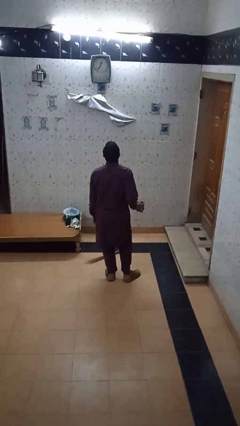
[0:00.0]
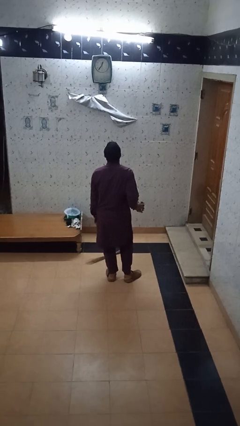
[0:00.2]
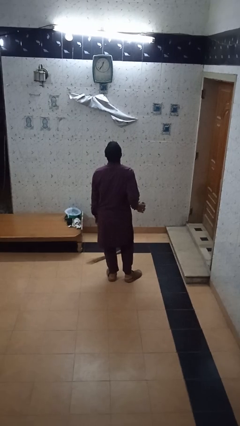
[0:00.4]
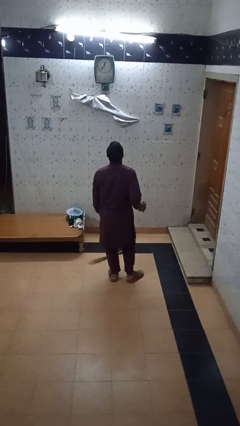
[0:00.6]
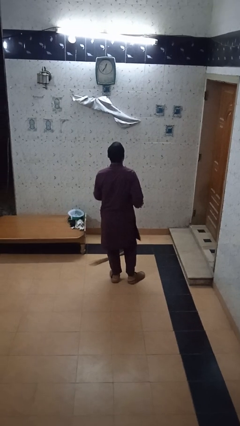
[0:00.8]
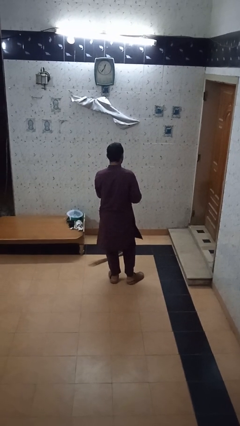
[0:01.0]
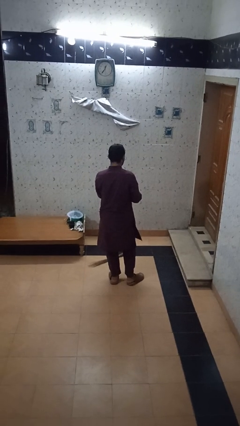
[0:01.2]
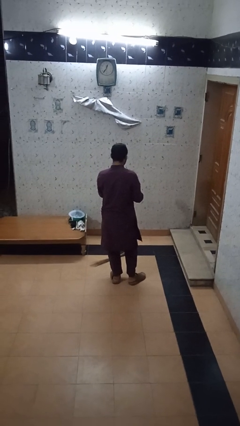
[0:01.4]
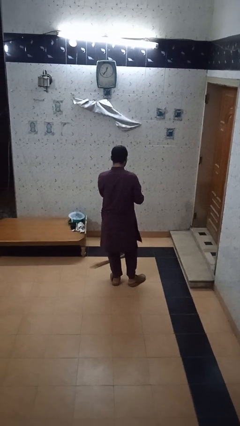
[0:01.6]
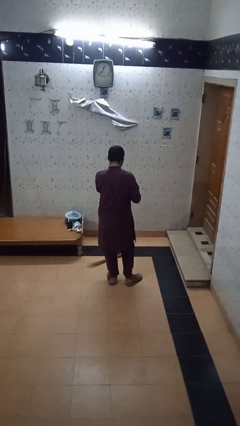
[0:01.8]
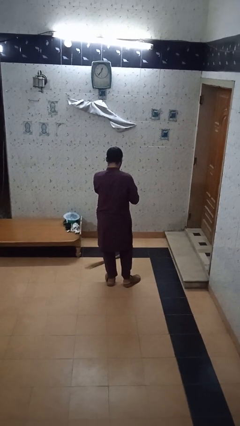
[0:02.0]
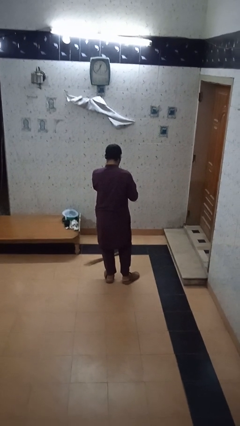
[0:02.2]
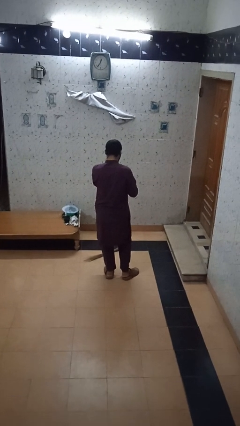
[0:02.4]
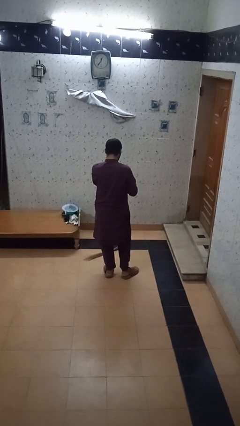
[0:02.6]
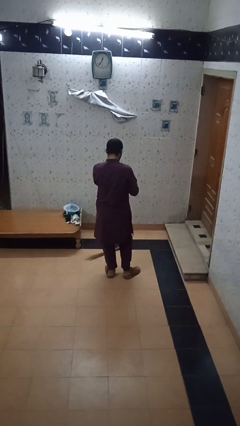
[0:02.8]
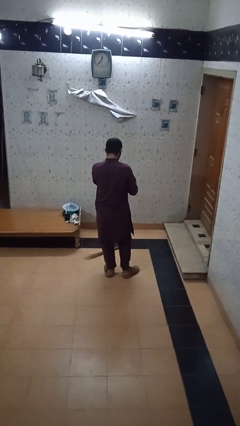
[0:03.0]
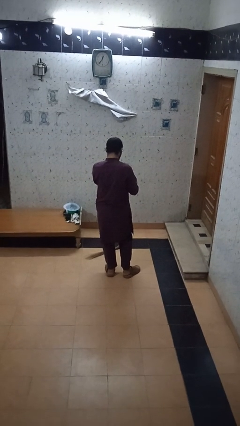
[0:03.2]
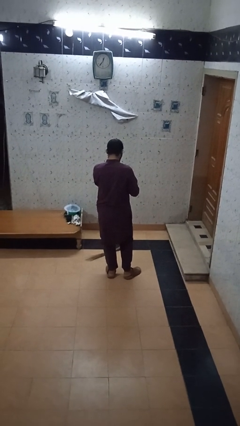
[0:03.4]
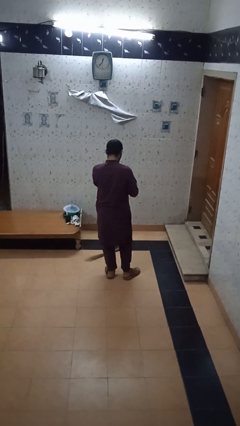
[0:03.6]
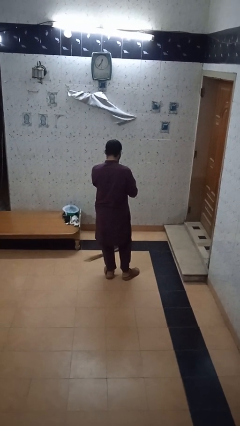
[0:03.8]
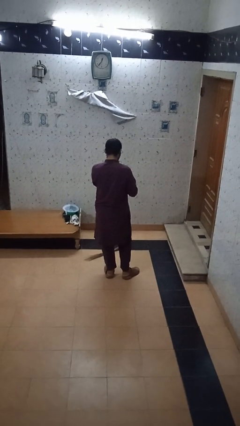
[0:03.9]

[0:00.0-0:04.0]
person drinks from straw

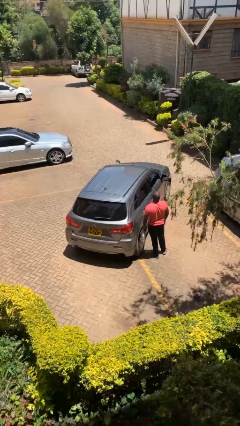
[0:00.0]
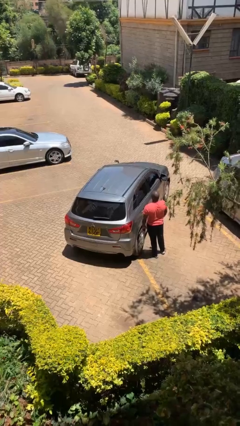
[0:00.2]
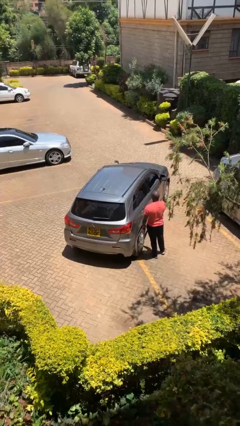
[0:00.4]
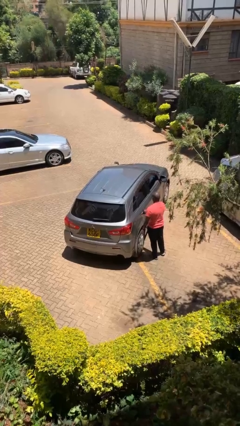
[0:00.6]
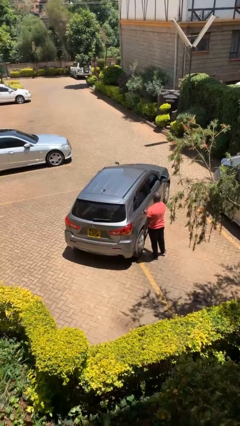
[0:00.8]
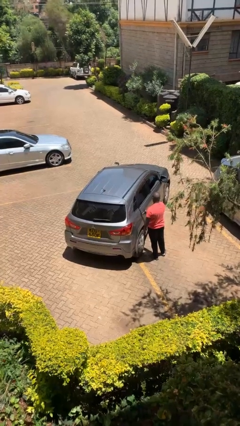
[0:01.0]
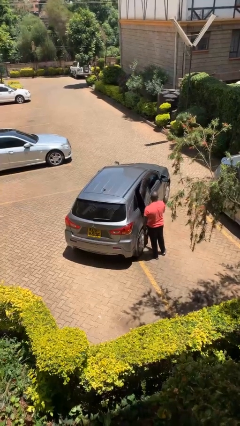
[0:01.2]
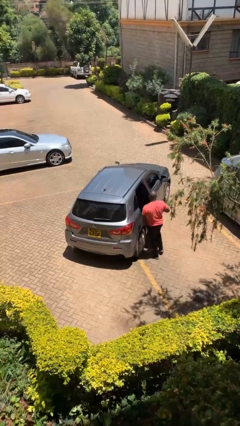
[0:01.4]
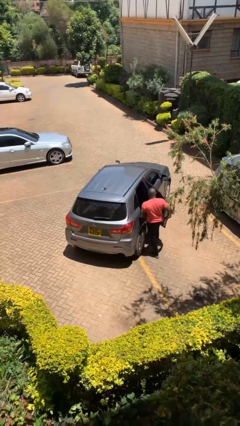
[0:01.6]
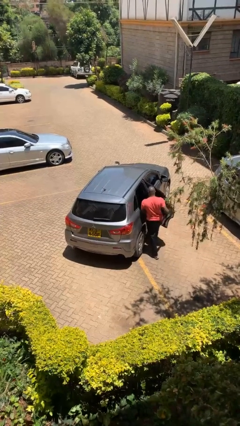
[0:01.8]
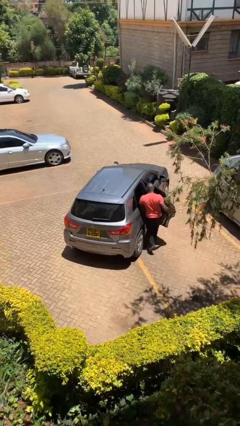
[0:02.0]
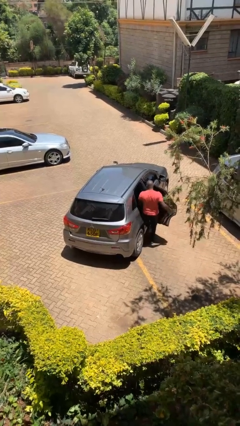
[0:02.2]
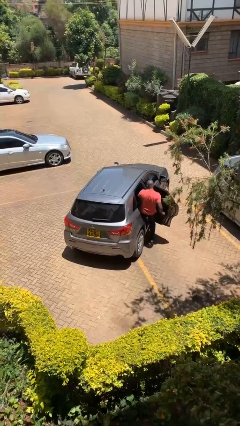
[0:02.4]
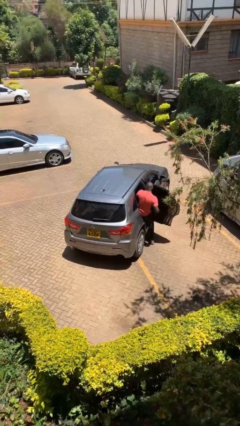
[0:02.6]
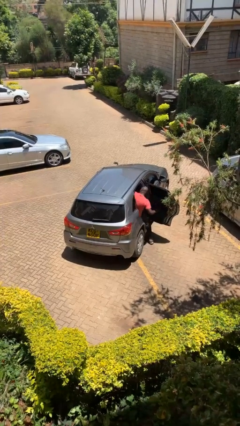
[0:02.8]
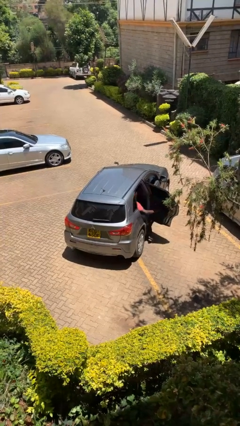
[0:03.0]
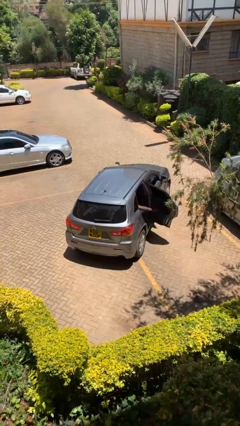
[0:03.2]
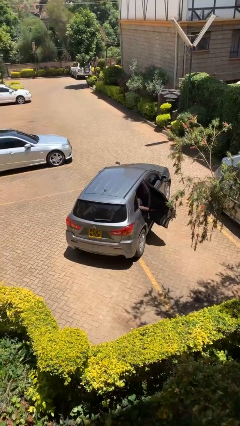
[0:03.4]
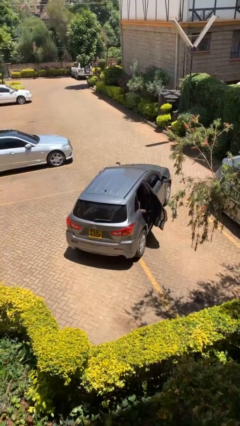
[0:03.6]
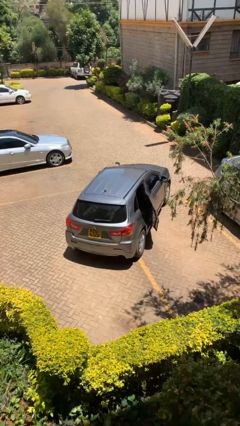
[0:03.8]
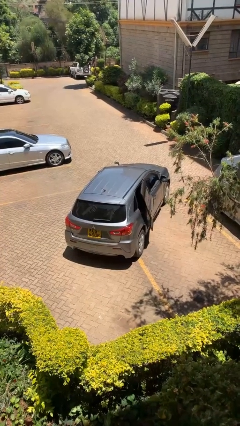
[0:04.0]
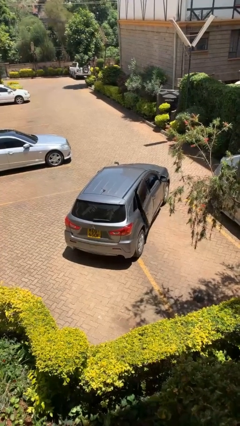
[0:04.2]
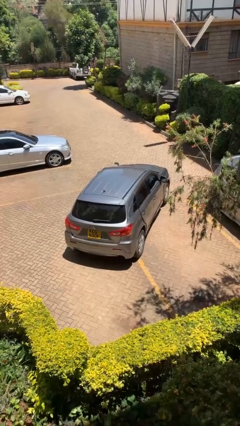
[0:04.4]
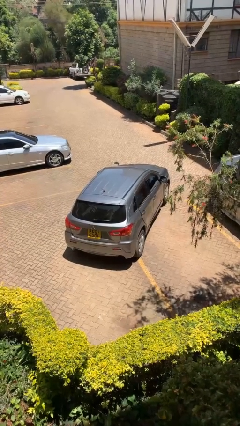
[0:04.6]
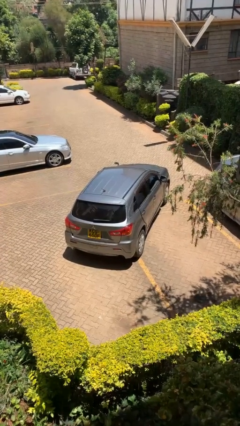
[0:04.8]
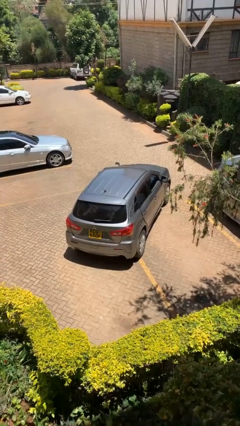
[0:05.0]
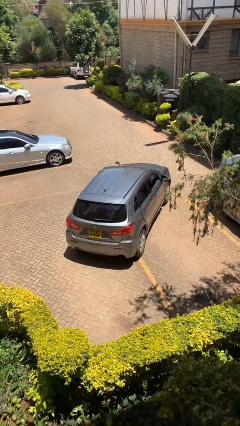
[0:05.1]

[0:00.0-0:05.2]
car picks up person

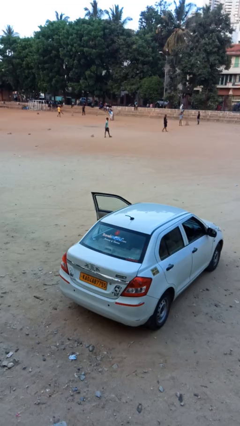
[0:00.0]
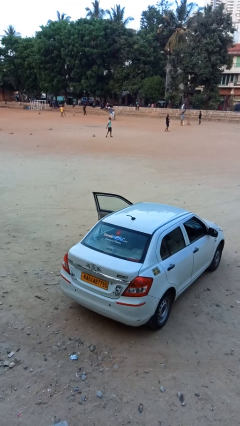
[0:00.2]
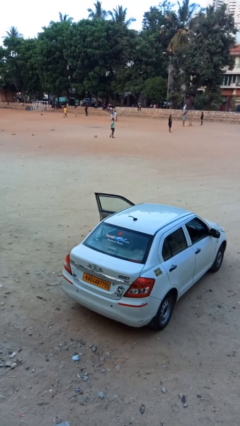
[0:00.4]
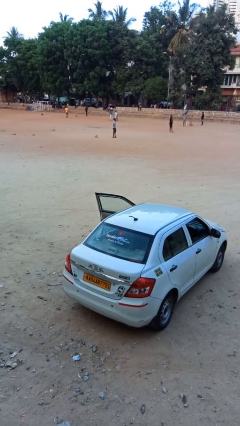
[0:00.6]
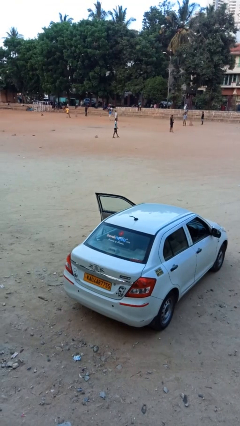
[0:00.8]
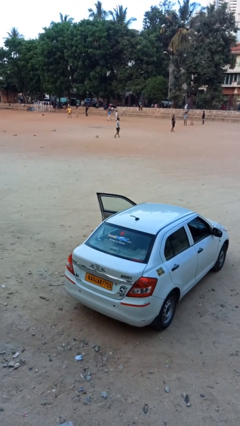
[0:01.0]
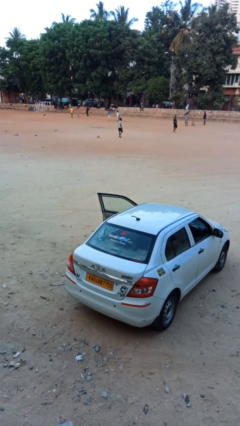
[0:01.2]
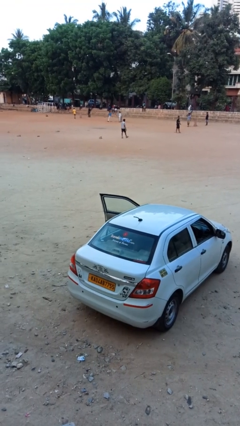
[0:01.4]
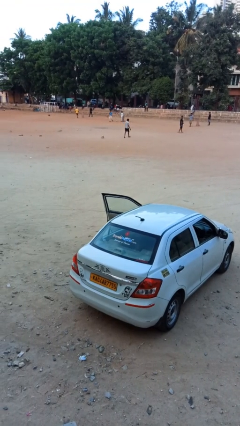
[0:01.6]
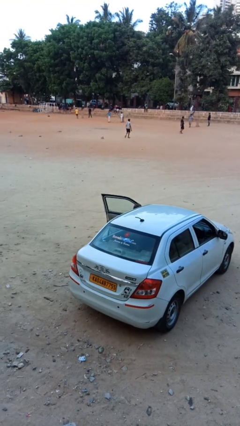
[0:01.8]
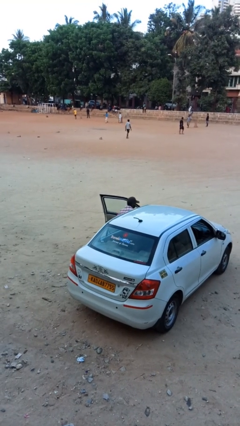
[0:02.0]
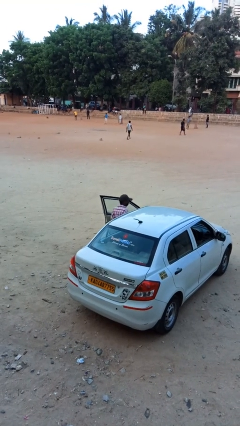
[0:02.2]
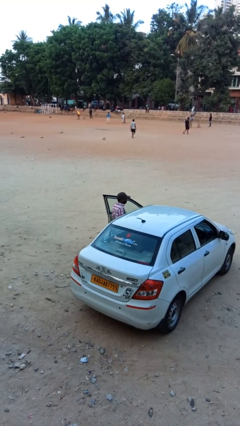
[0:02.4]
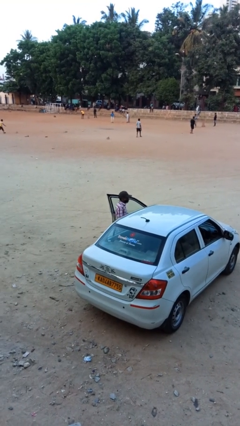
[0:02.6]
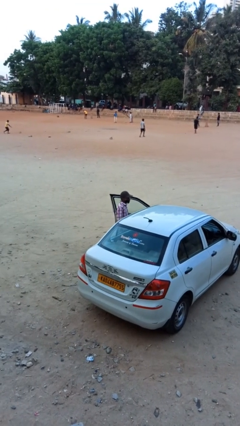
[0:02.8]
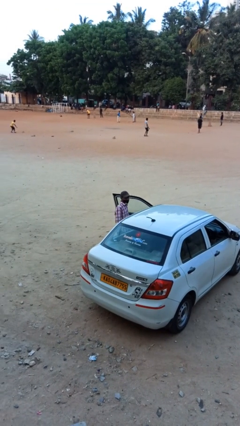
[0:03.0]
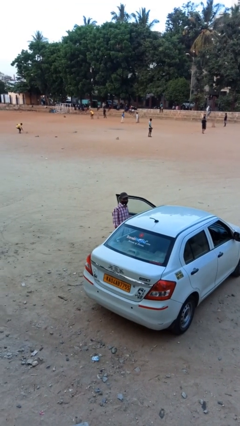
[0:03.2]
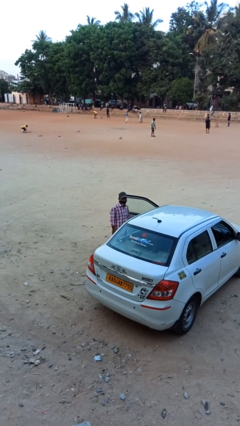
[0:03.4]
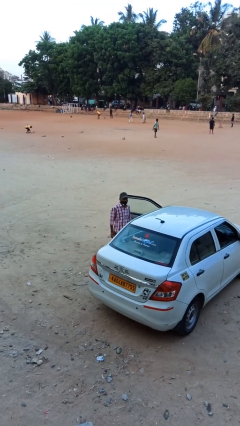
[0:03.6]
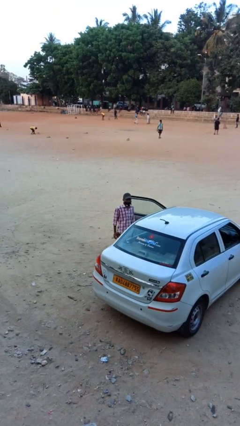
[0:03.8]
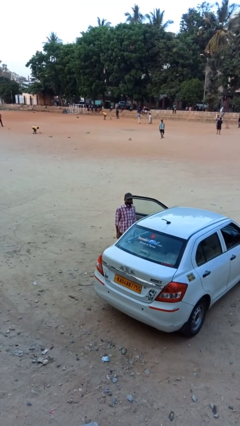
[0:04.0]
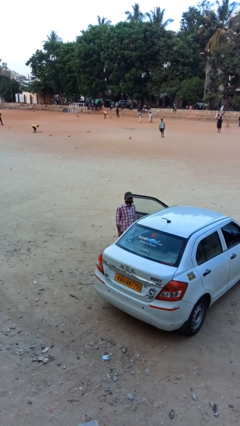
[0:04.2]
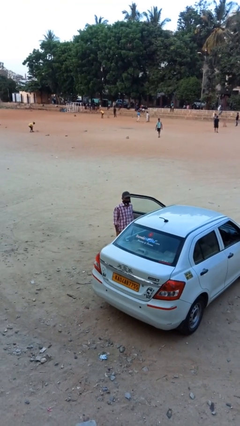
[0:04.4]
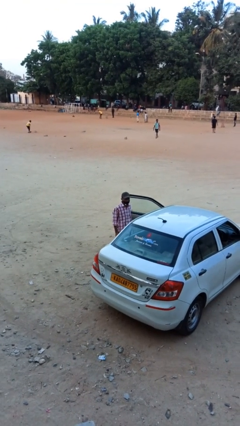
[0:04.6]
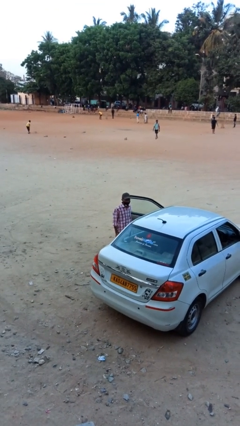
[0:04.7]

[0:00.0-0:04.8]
person exits car

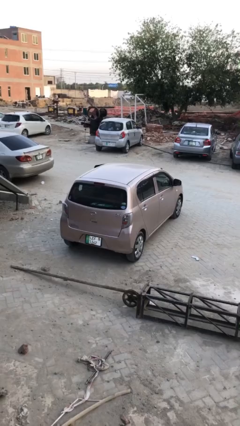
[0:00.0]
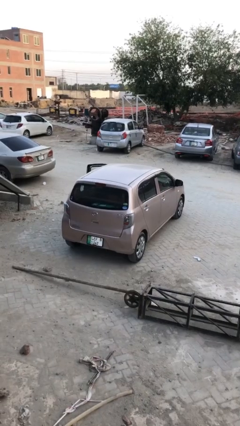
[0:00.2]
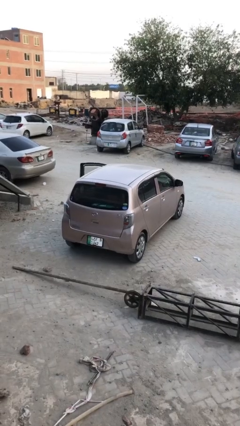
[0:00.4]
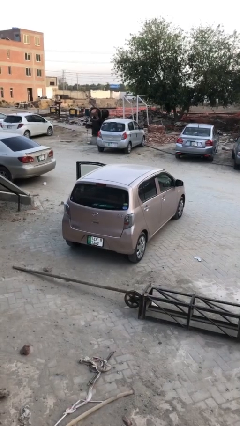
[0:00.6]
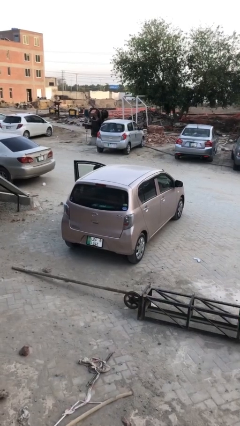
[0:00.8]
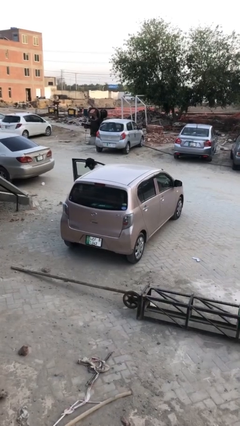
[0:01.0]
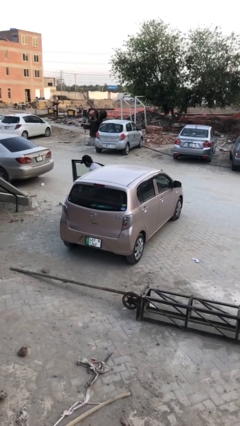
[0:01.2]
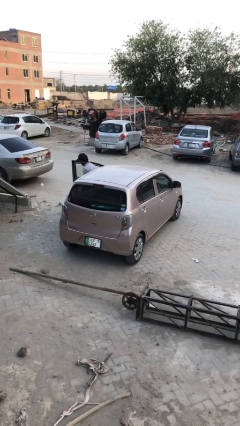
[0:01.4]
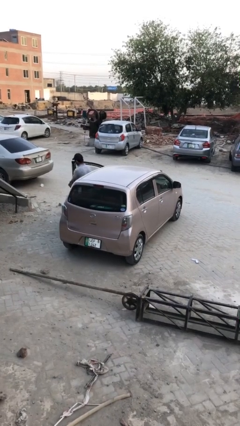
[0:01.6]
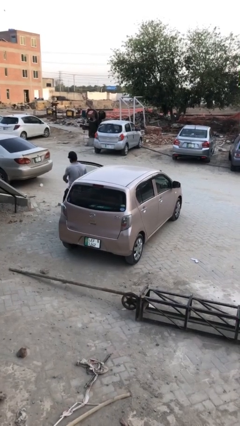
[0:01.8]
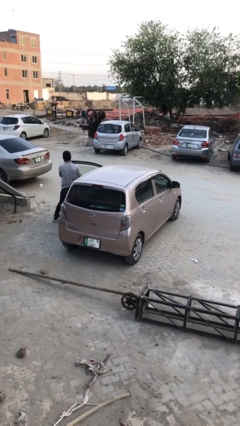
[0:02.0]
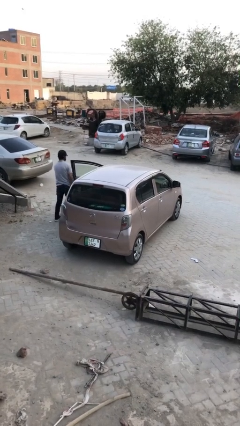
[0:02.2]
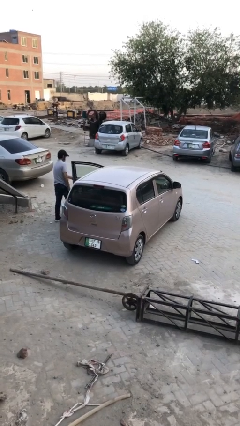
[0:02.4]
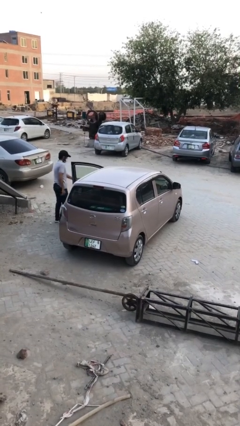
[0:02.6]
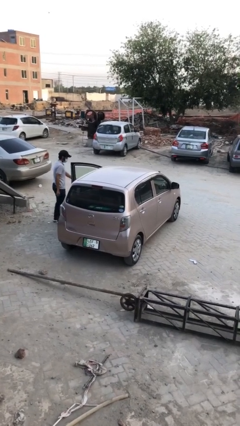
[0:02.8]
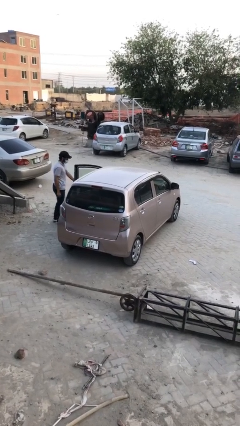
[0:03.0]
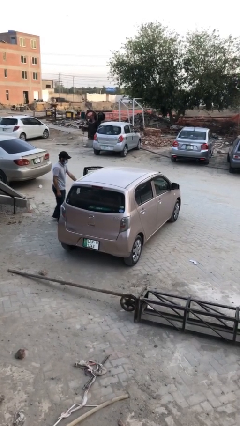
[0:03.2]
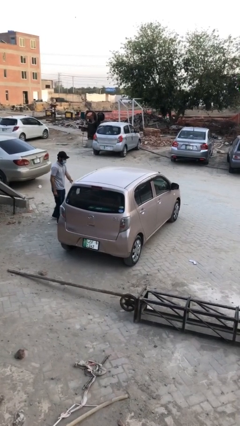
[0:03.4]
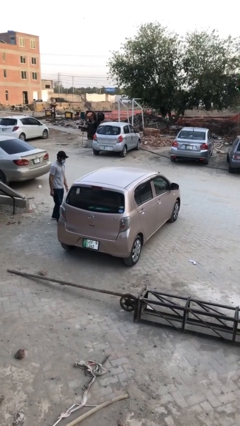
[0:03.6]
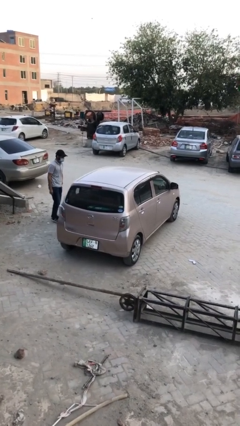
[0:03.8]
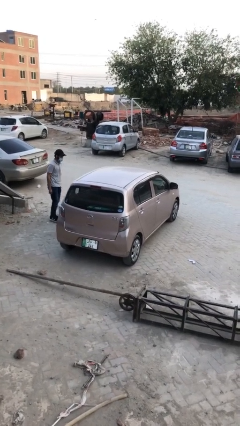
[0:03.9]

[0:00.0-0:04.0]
car drops off person

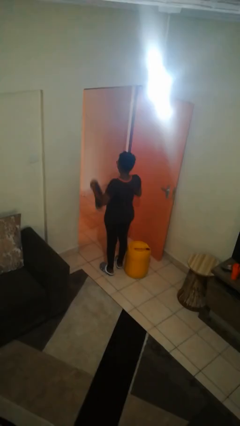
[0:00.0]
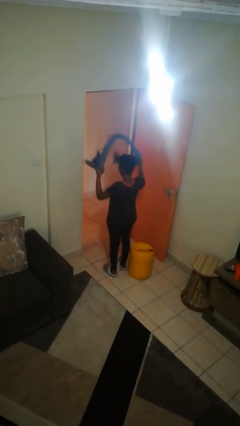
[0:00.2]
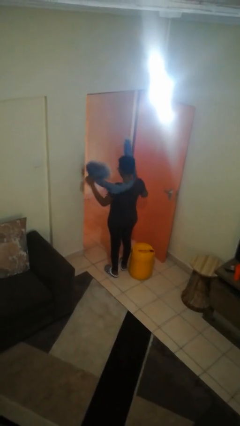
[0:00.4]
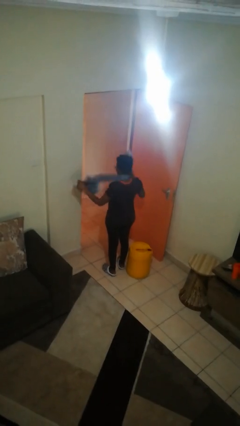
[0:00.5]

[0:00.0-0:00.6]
person takes off scarf
